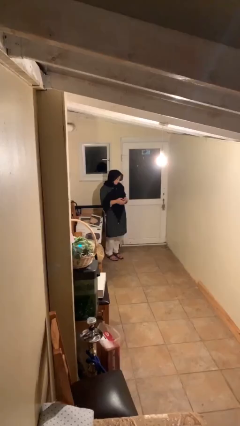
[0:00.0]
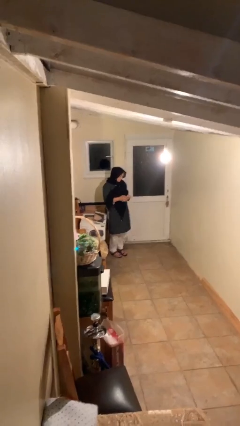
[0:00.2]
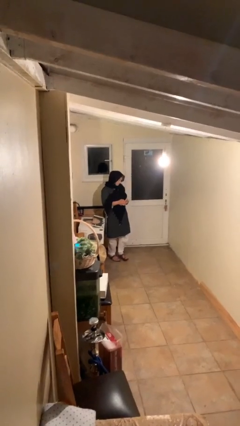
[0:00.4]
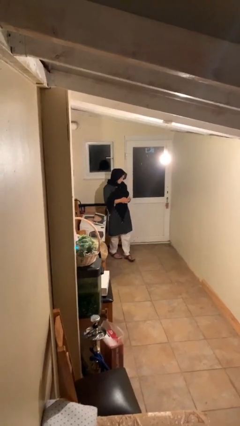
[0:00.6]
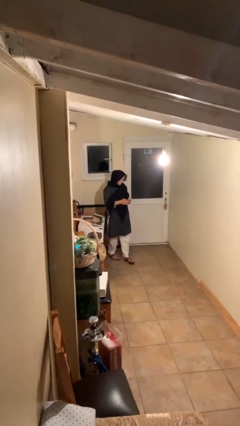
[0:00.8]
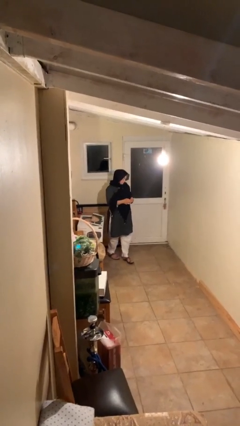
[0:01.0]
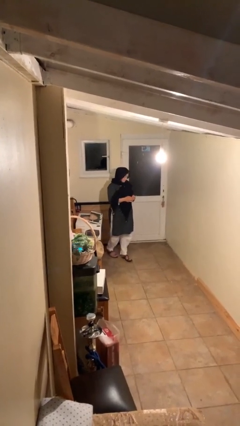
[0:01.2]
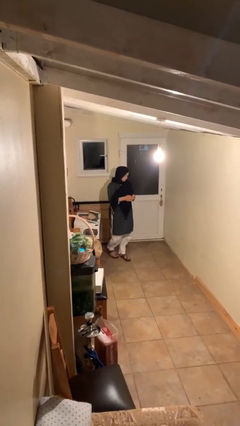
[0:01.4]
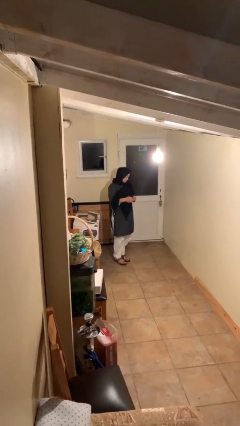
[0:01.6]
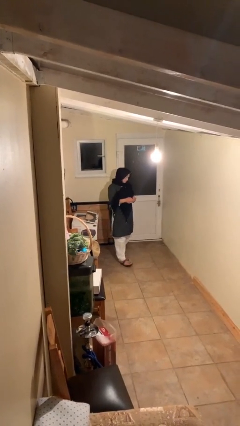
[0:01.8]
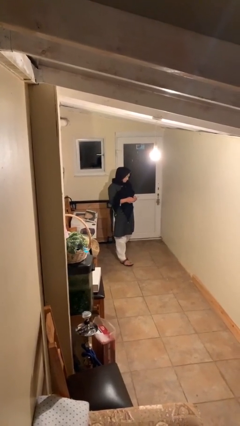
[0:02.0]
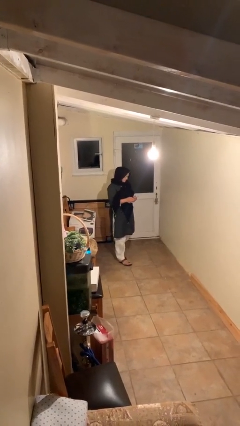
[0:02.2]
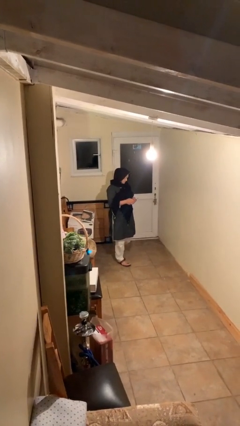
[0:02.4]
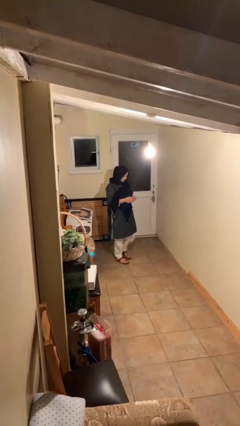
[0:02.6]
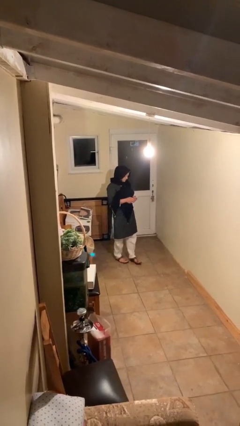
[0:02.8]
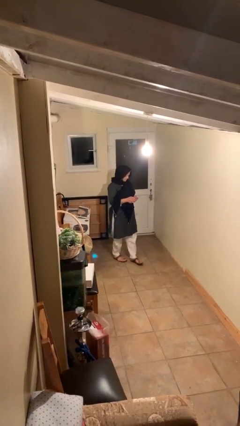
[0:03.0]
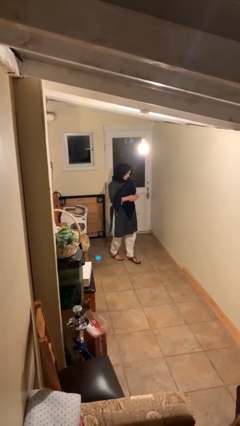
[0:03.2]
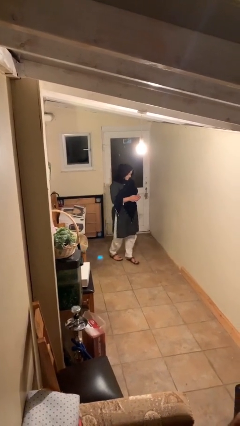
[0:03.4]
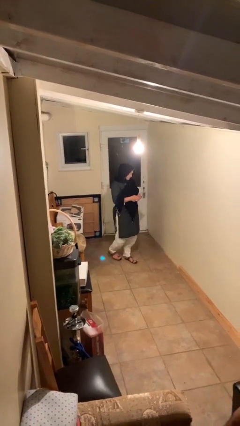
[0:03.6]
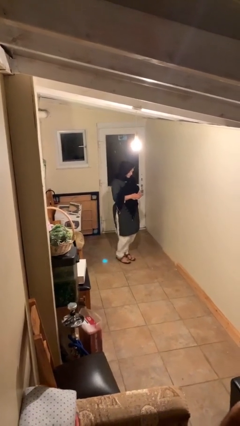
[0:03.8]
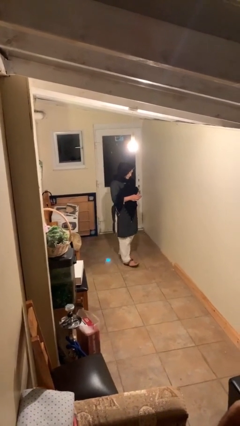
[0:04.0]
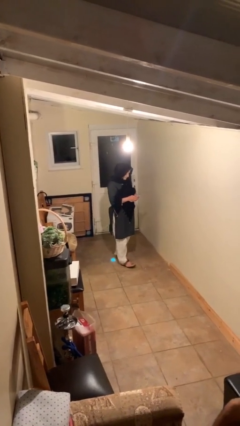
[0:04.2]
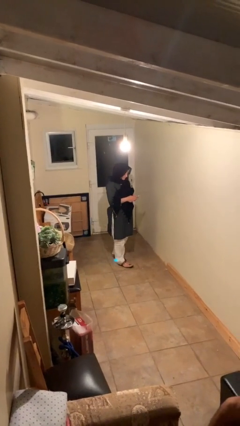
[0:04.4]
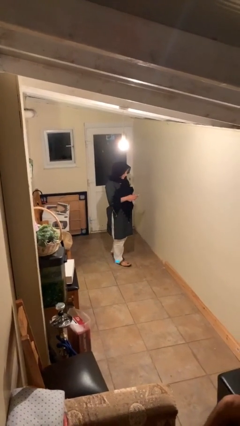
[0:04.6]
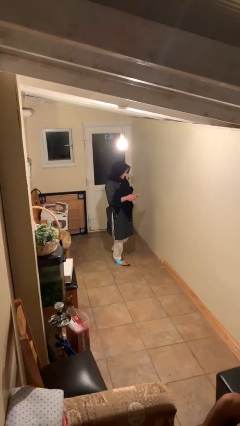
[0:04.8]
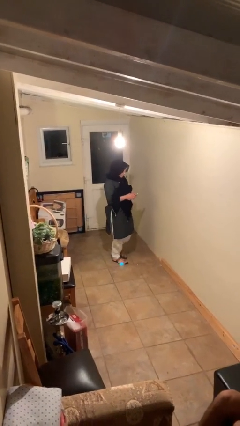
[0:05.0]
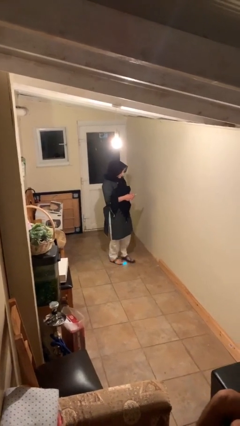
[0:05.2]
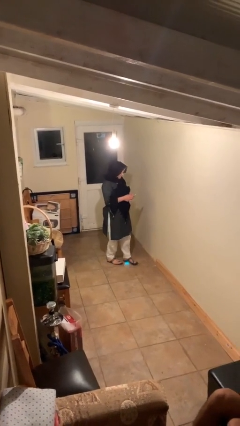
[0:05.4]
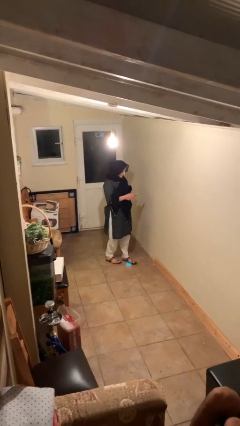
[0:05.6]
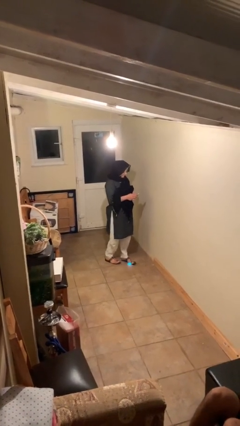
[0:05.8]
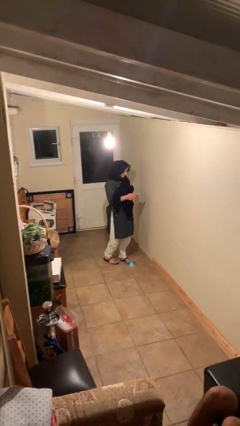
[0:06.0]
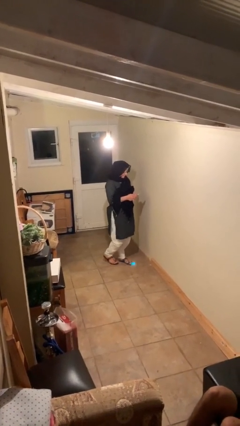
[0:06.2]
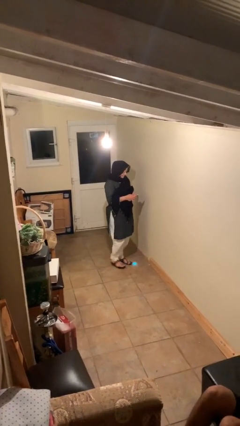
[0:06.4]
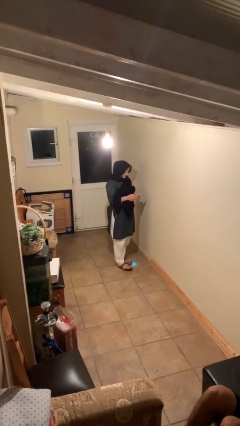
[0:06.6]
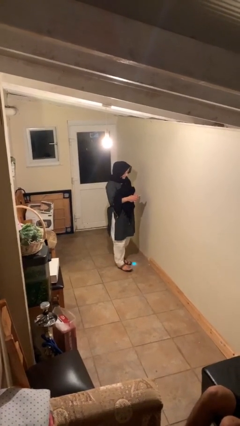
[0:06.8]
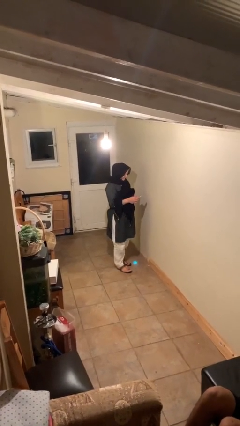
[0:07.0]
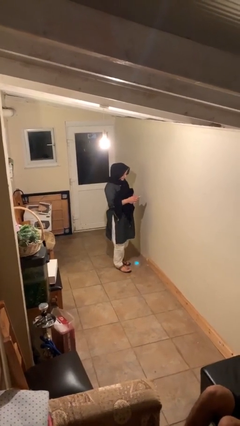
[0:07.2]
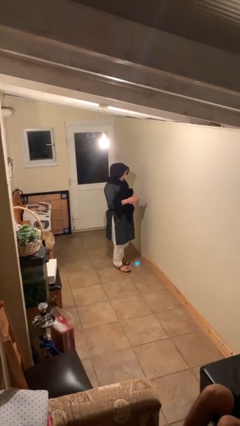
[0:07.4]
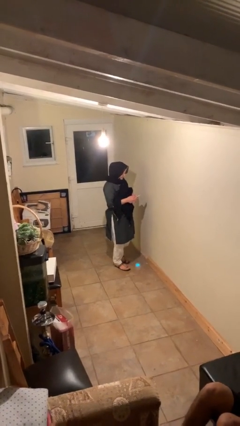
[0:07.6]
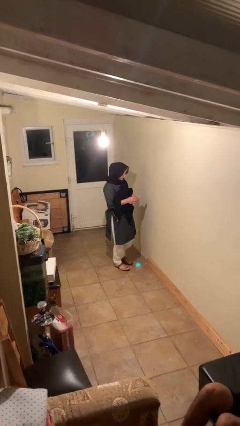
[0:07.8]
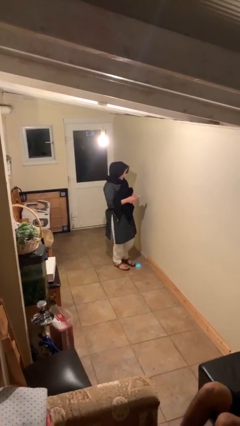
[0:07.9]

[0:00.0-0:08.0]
person texts on phone

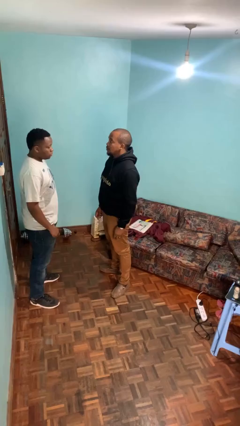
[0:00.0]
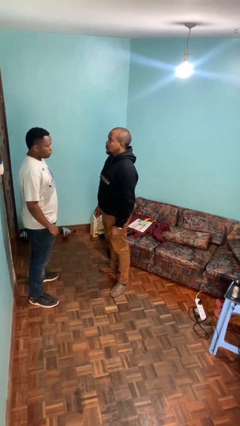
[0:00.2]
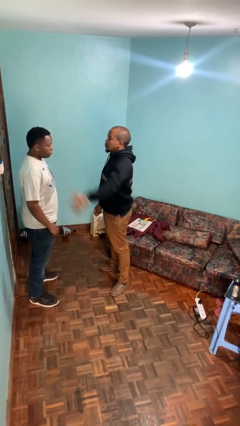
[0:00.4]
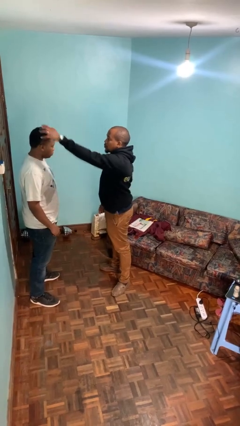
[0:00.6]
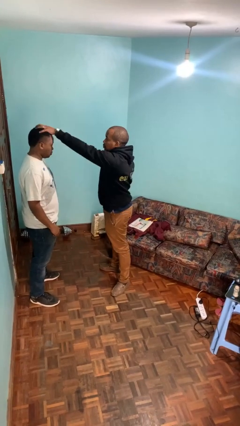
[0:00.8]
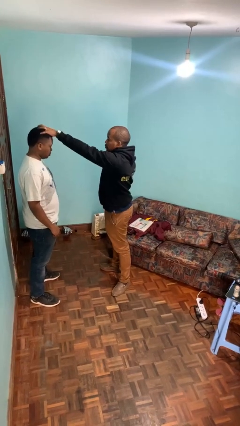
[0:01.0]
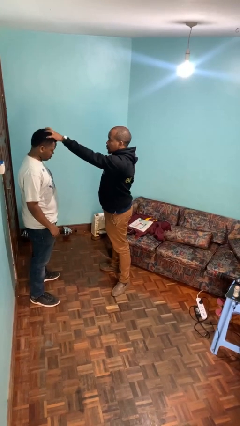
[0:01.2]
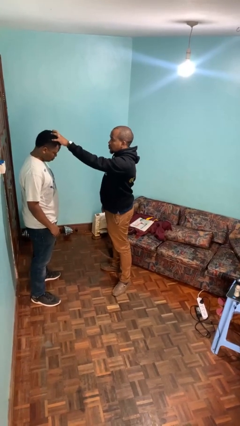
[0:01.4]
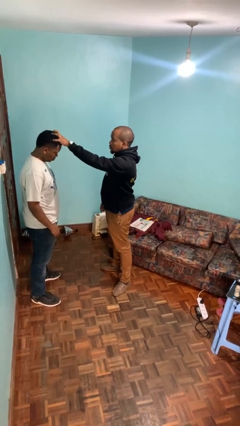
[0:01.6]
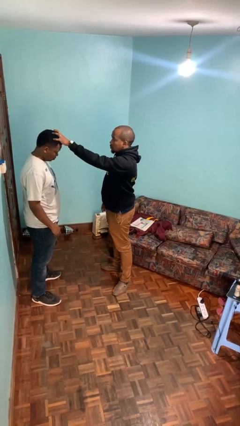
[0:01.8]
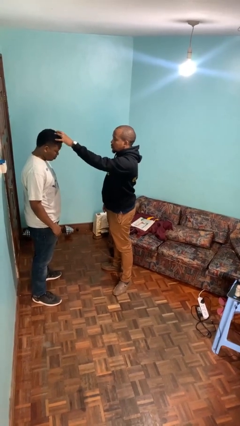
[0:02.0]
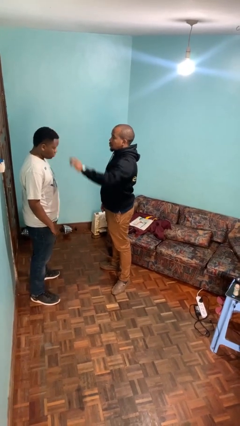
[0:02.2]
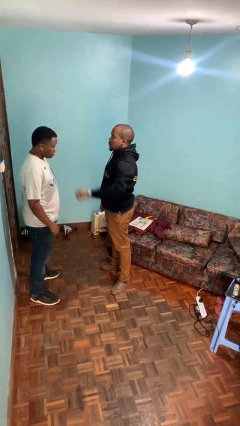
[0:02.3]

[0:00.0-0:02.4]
person grabs person by hair

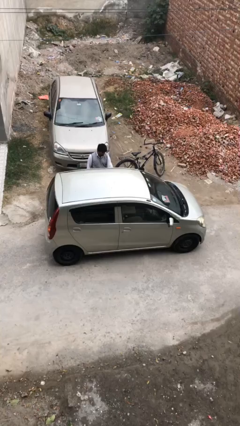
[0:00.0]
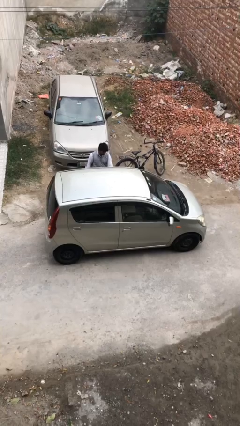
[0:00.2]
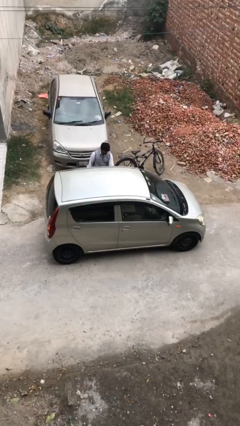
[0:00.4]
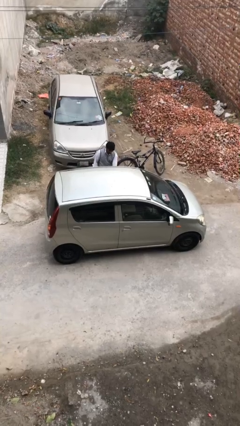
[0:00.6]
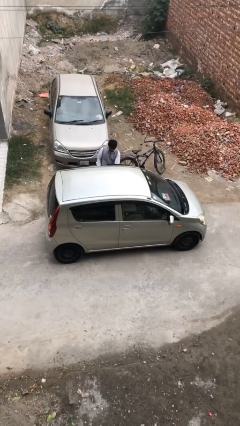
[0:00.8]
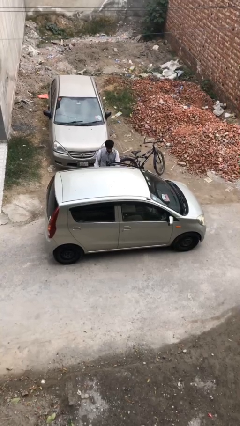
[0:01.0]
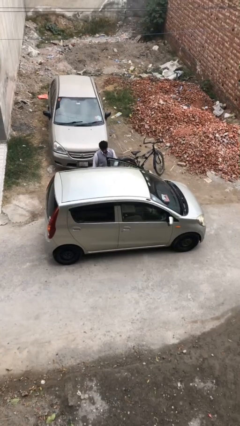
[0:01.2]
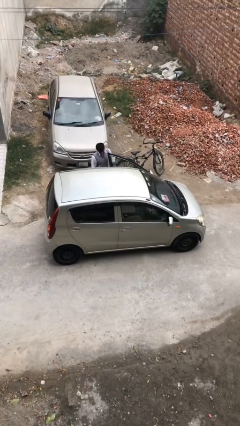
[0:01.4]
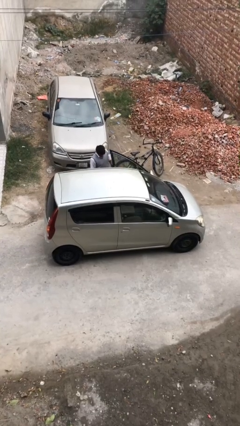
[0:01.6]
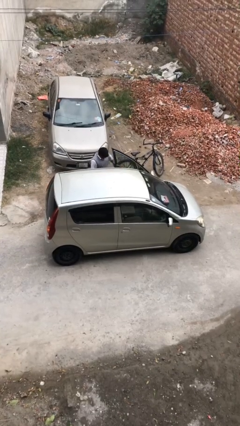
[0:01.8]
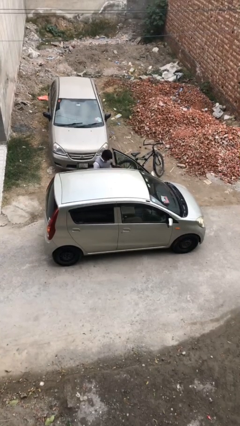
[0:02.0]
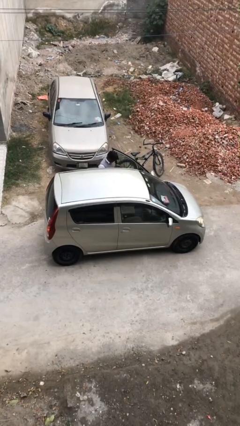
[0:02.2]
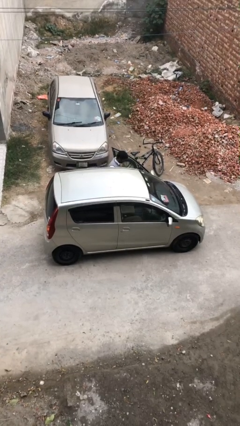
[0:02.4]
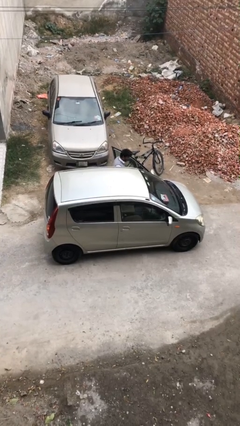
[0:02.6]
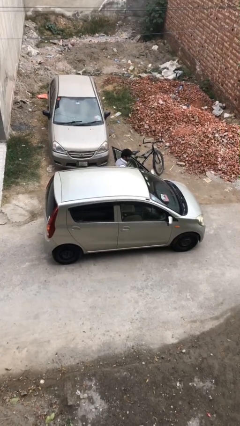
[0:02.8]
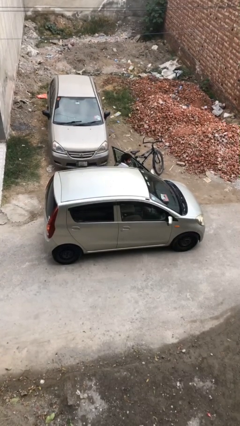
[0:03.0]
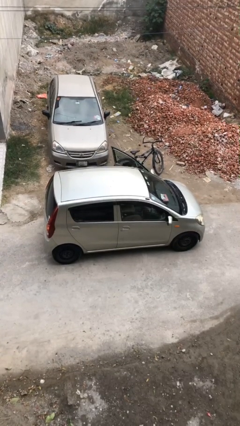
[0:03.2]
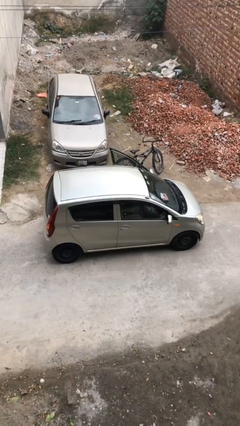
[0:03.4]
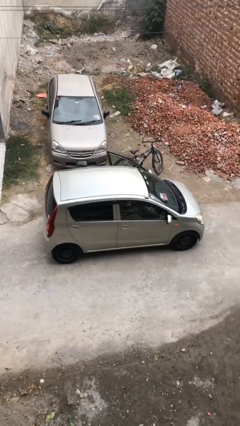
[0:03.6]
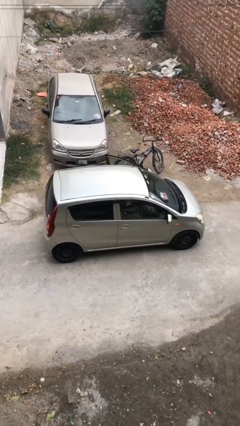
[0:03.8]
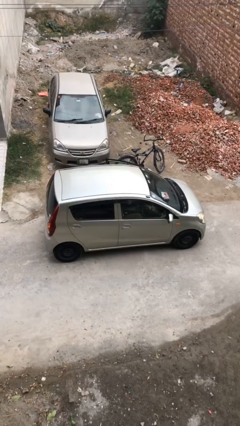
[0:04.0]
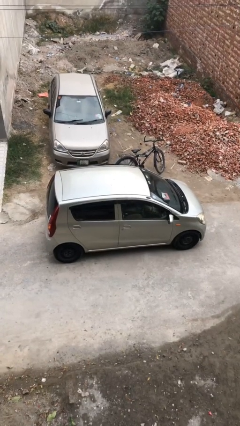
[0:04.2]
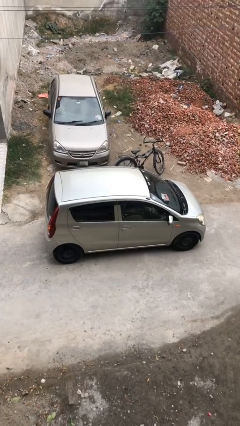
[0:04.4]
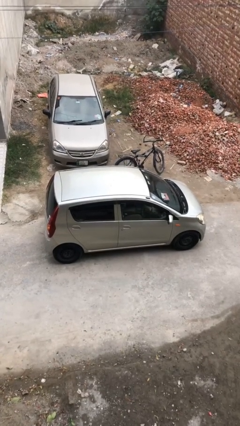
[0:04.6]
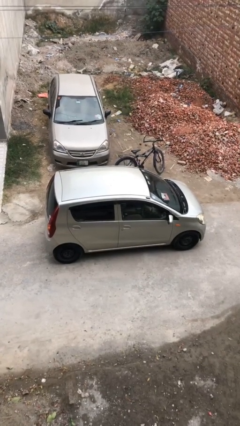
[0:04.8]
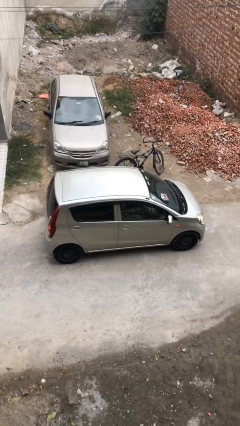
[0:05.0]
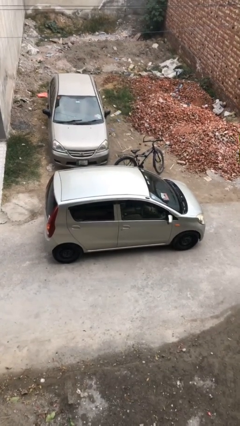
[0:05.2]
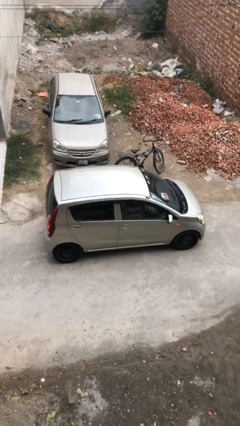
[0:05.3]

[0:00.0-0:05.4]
car picks up person

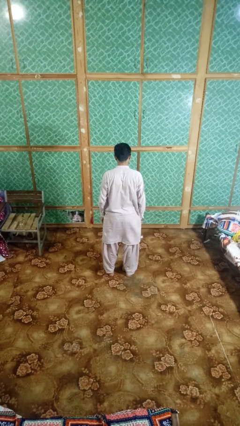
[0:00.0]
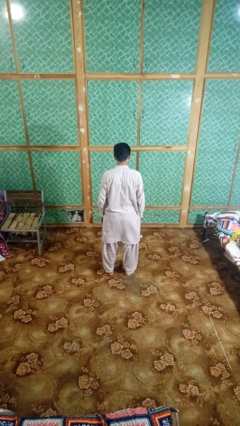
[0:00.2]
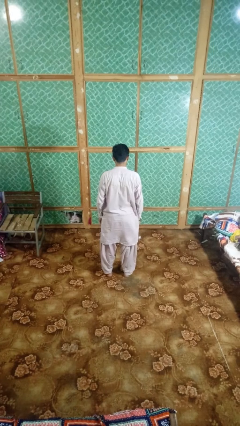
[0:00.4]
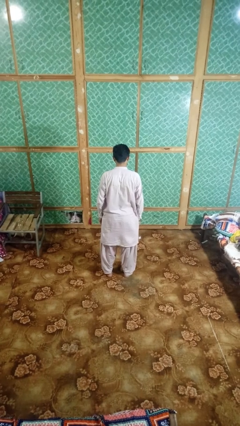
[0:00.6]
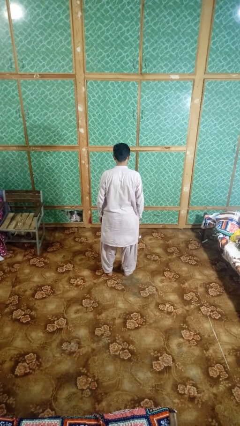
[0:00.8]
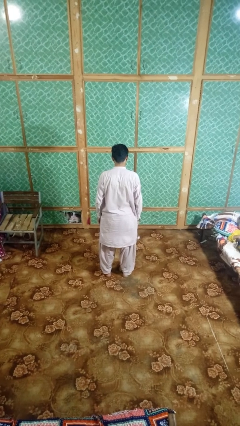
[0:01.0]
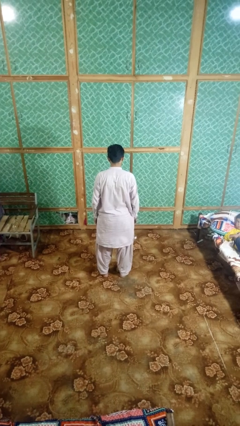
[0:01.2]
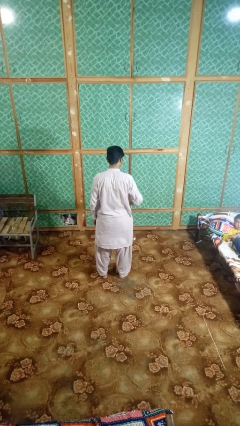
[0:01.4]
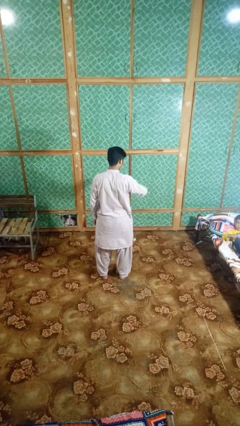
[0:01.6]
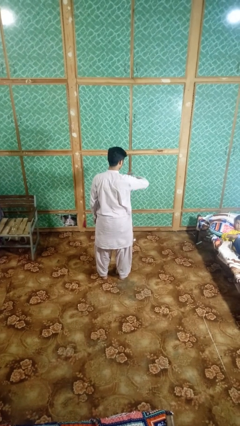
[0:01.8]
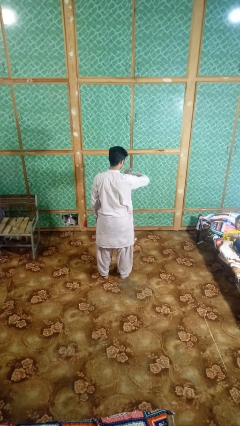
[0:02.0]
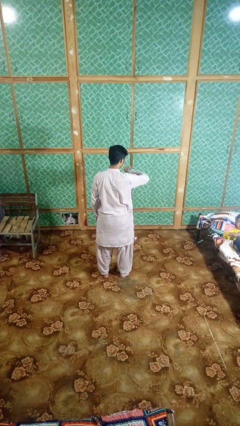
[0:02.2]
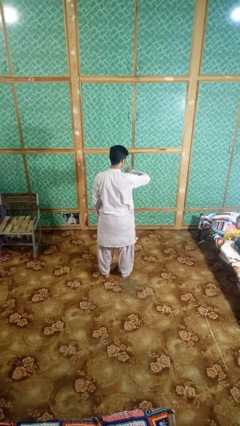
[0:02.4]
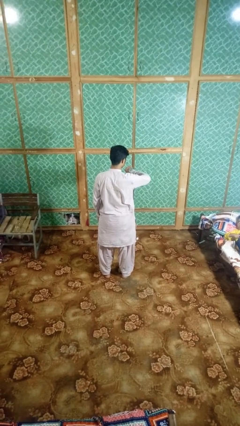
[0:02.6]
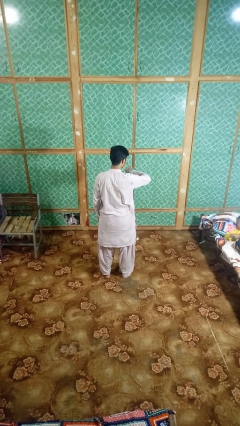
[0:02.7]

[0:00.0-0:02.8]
person looks at wristwatch
